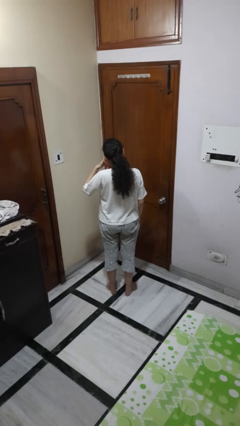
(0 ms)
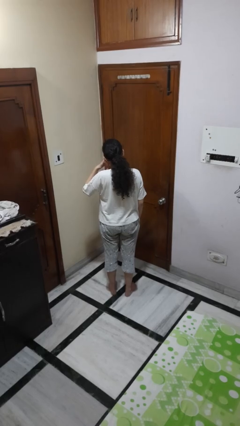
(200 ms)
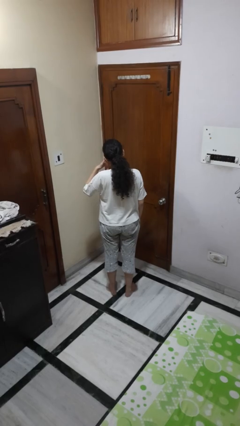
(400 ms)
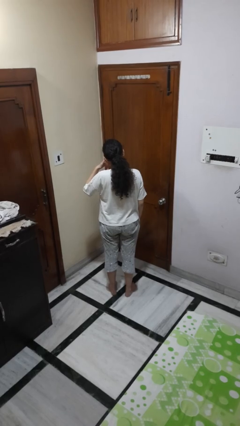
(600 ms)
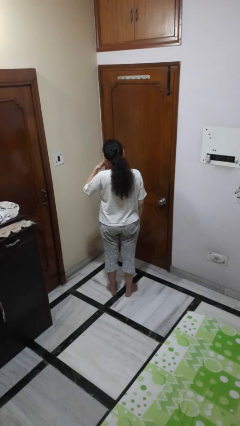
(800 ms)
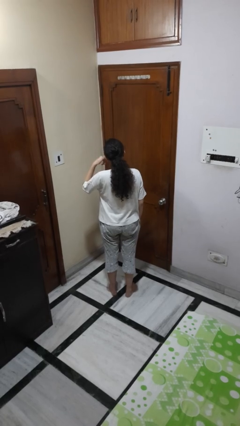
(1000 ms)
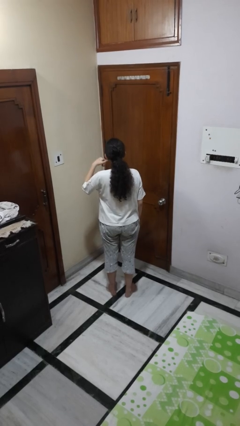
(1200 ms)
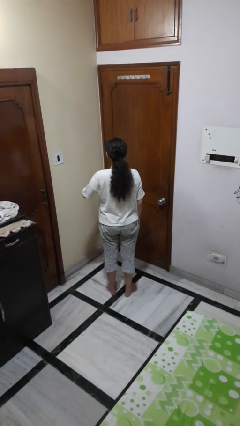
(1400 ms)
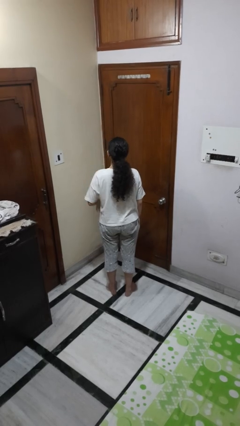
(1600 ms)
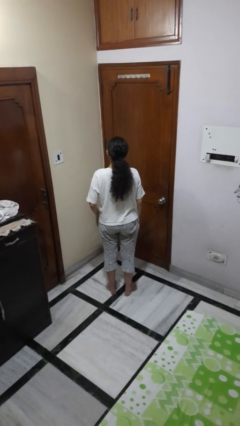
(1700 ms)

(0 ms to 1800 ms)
person gestures call me

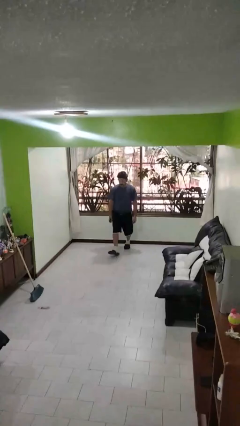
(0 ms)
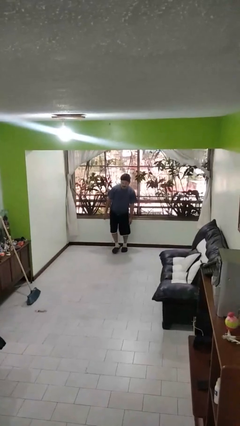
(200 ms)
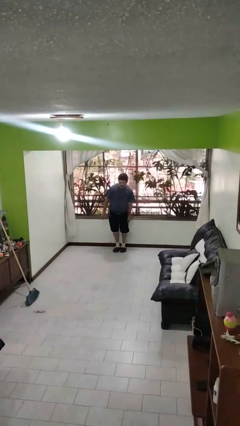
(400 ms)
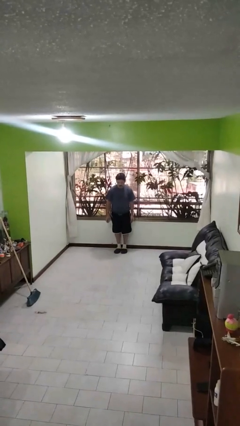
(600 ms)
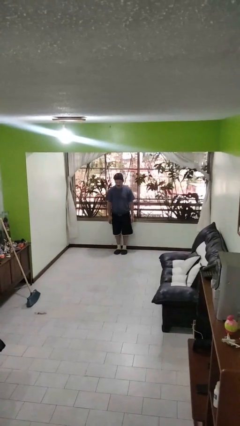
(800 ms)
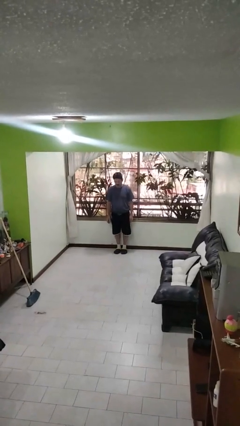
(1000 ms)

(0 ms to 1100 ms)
person stands up from floor

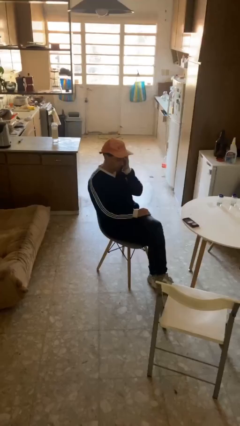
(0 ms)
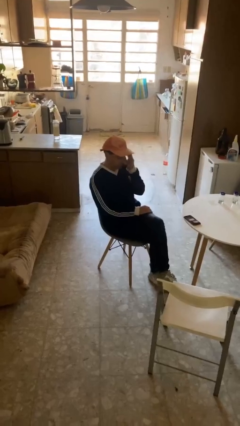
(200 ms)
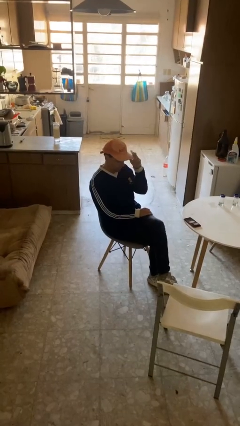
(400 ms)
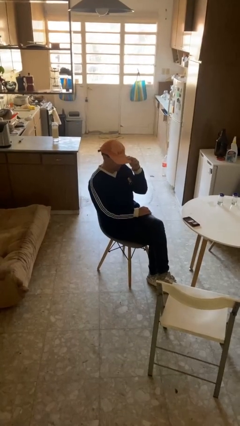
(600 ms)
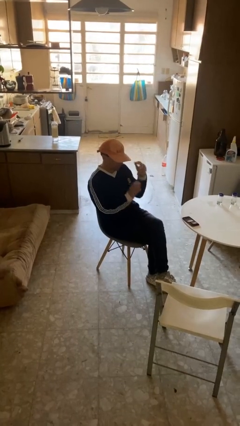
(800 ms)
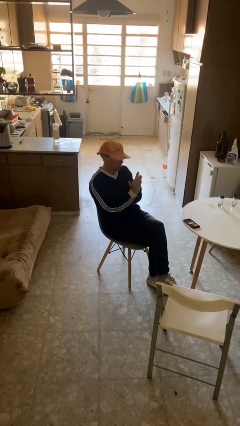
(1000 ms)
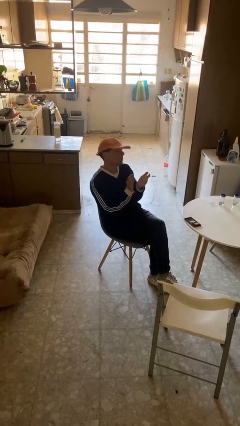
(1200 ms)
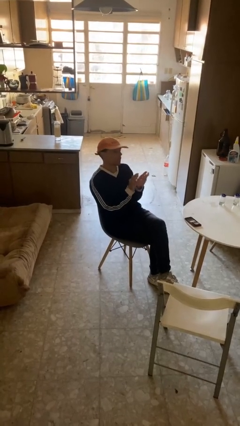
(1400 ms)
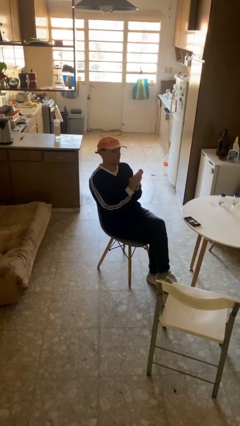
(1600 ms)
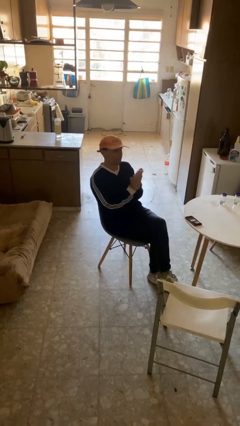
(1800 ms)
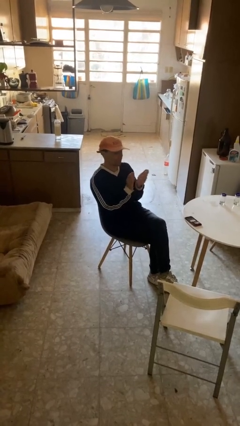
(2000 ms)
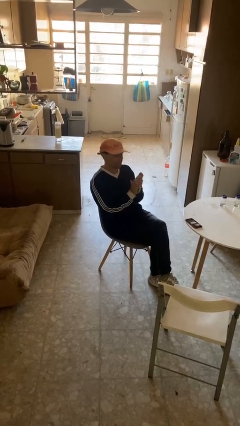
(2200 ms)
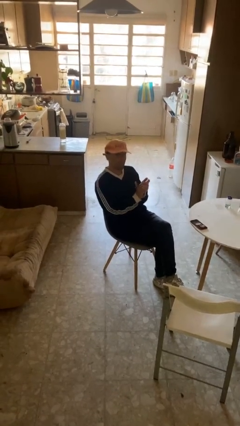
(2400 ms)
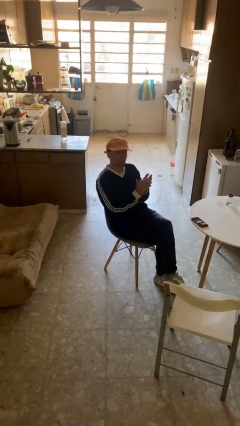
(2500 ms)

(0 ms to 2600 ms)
person claps hands

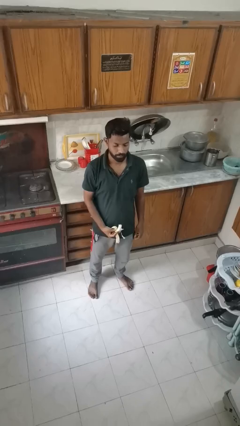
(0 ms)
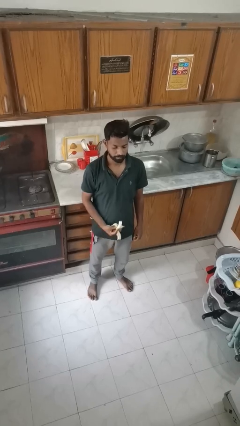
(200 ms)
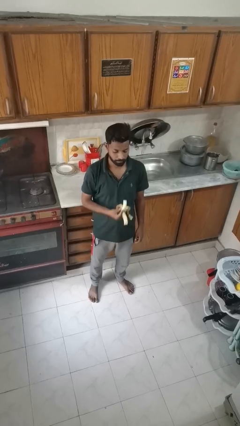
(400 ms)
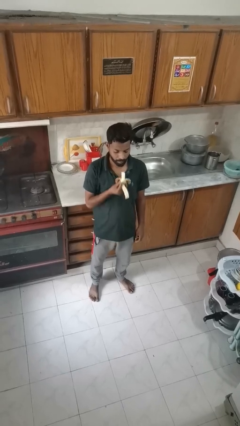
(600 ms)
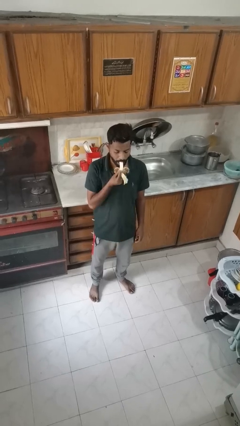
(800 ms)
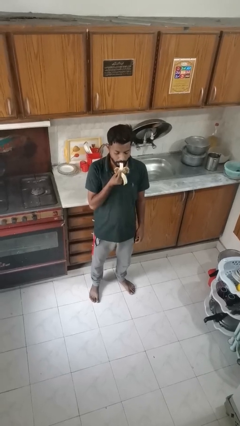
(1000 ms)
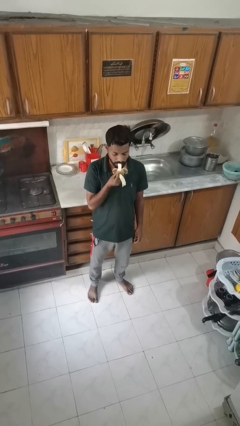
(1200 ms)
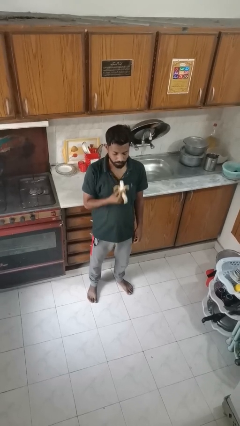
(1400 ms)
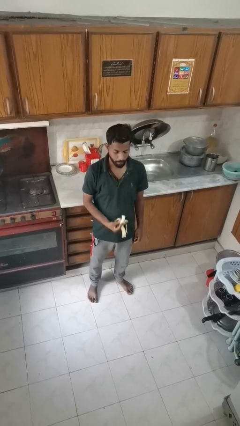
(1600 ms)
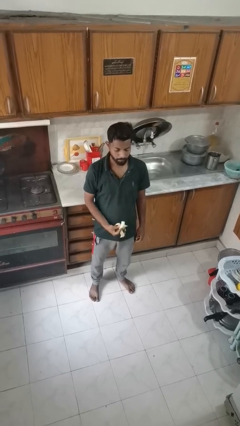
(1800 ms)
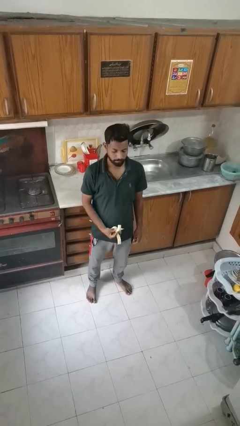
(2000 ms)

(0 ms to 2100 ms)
person eats banana

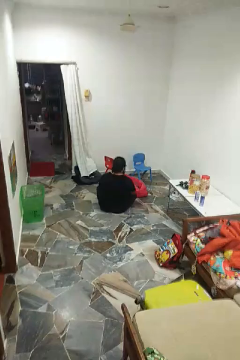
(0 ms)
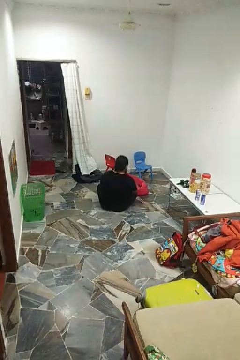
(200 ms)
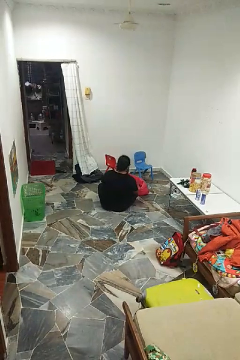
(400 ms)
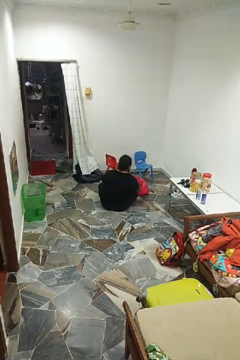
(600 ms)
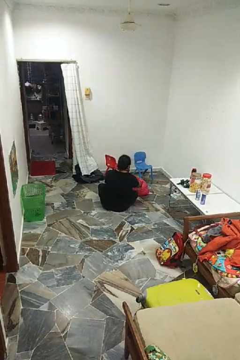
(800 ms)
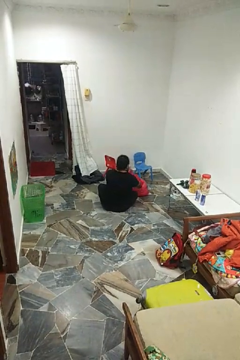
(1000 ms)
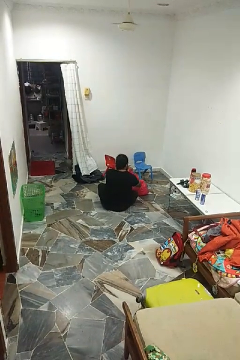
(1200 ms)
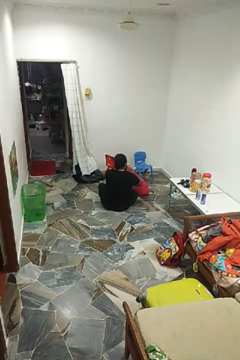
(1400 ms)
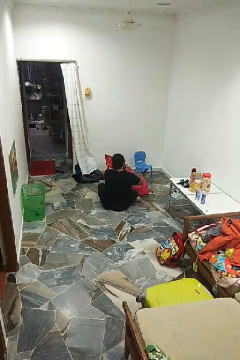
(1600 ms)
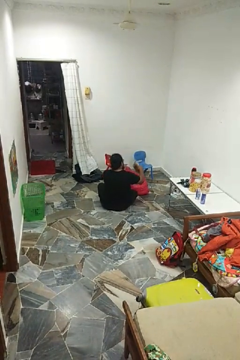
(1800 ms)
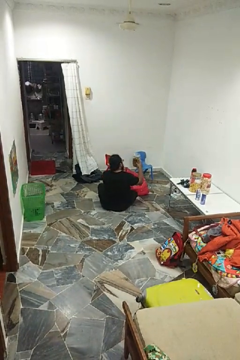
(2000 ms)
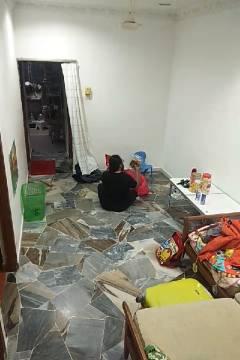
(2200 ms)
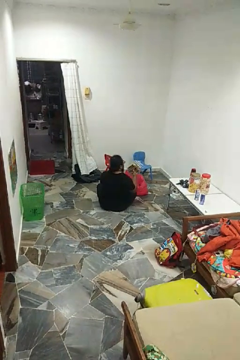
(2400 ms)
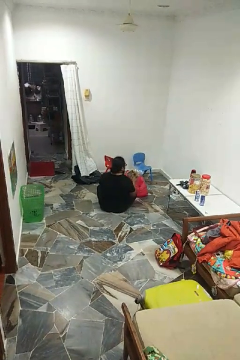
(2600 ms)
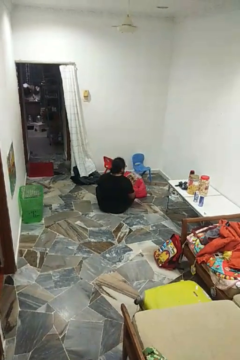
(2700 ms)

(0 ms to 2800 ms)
person takes object from bag

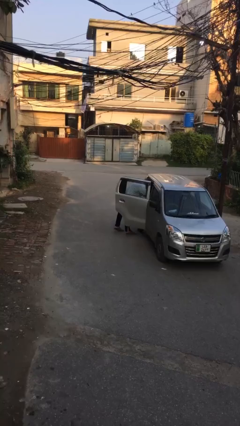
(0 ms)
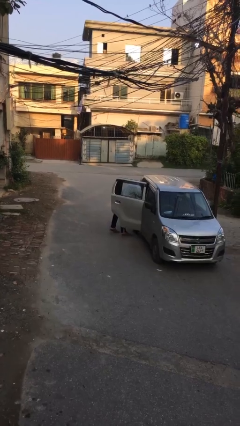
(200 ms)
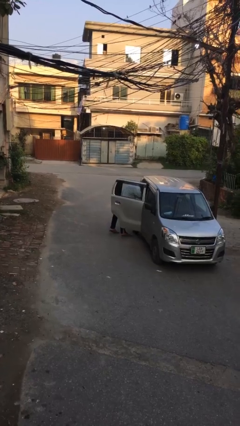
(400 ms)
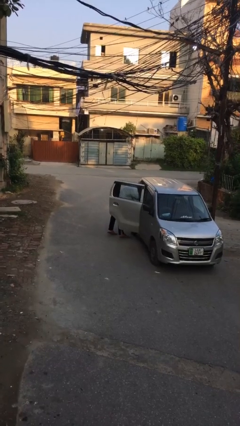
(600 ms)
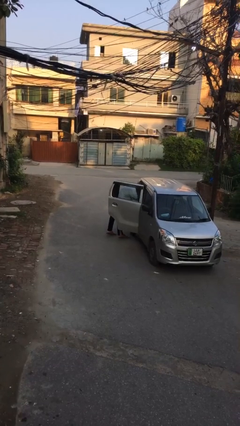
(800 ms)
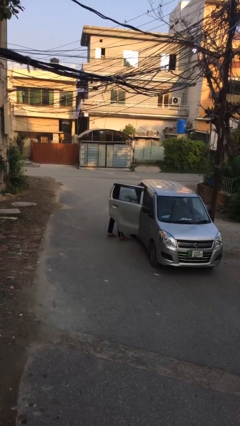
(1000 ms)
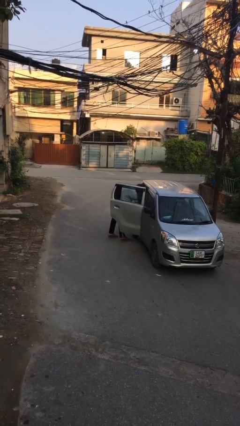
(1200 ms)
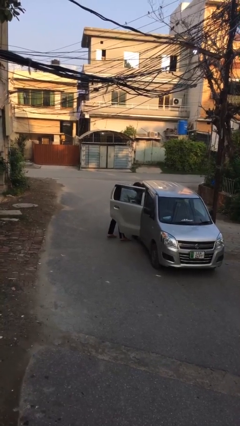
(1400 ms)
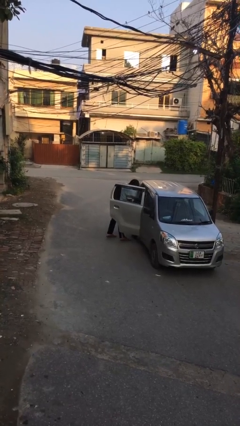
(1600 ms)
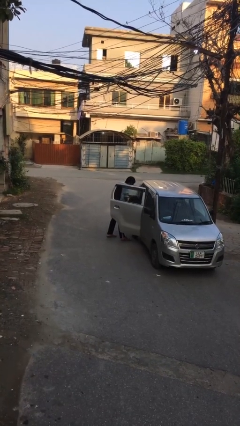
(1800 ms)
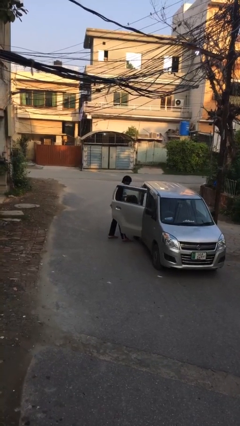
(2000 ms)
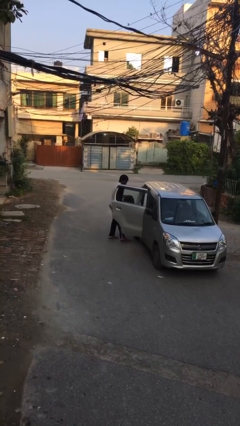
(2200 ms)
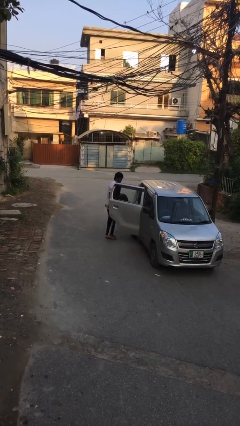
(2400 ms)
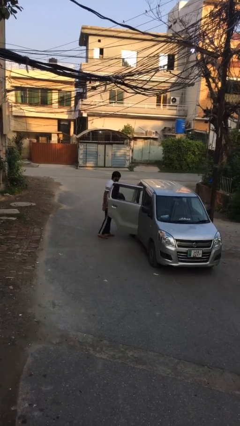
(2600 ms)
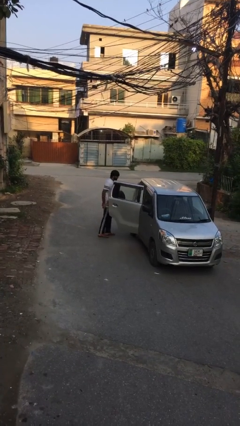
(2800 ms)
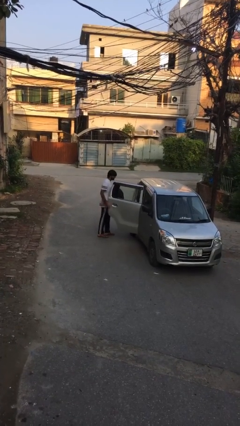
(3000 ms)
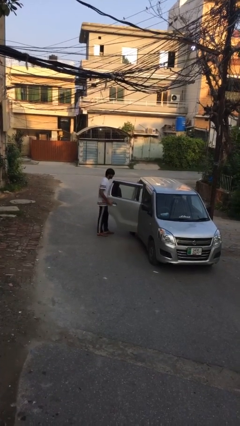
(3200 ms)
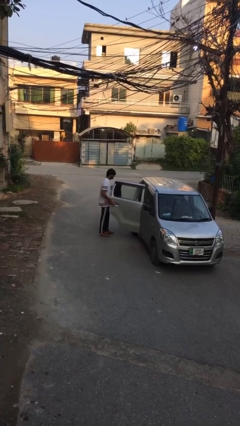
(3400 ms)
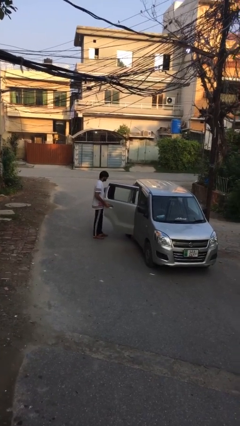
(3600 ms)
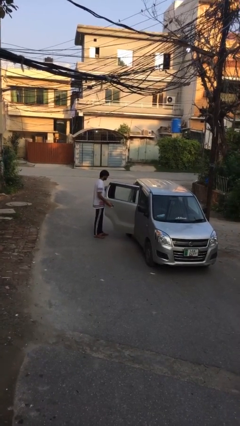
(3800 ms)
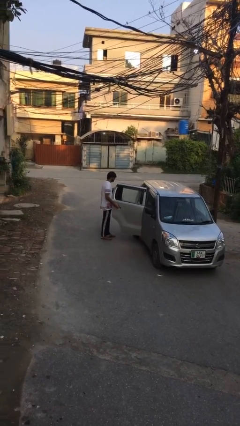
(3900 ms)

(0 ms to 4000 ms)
person unloads car

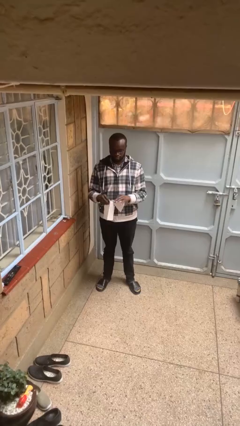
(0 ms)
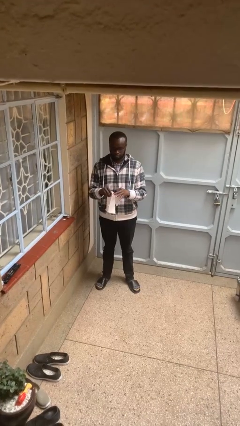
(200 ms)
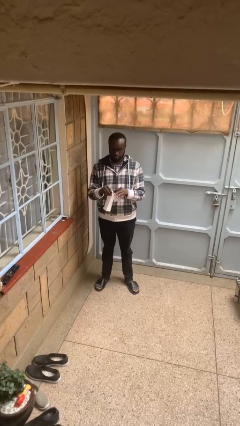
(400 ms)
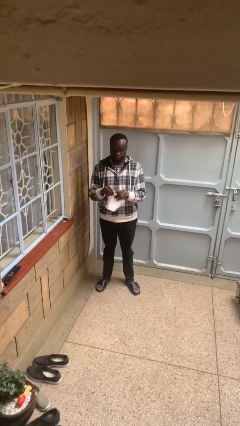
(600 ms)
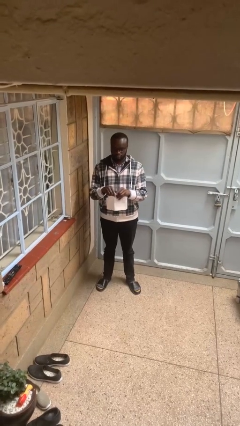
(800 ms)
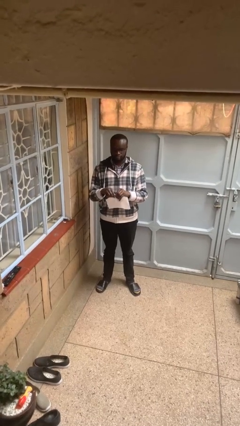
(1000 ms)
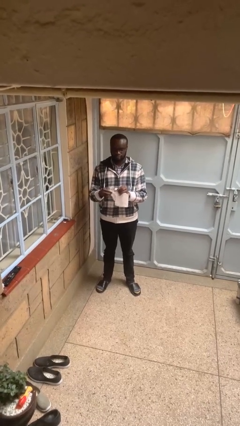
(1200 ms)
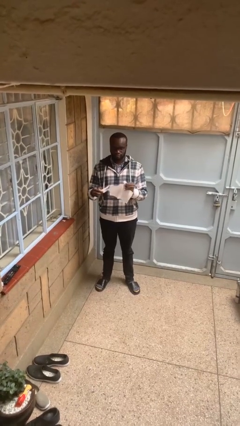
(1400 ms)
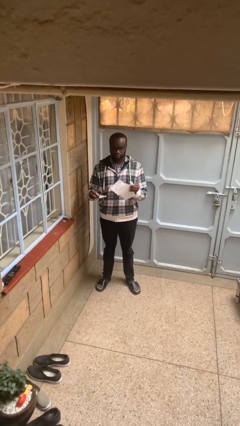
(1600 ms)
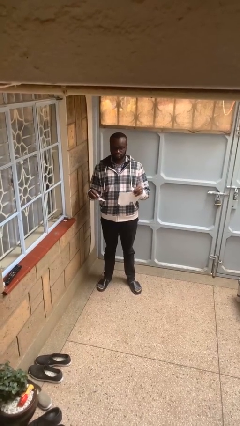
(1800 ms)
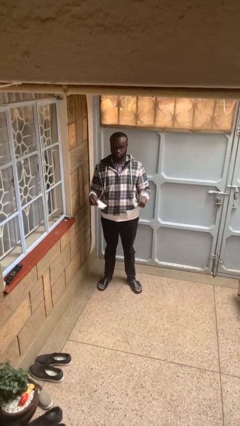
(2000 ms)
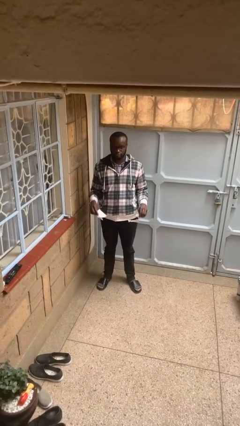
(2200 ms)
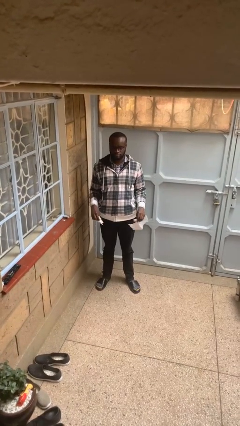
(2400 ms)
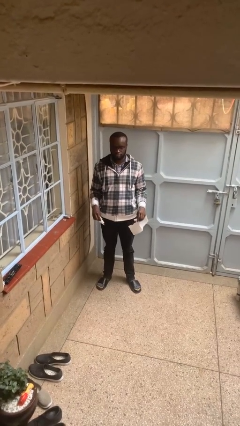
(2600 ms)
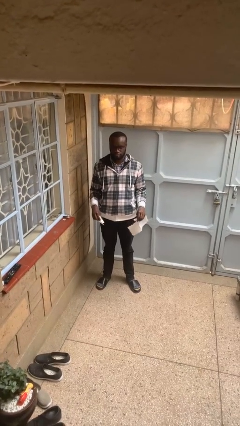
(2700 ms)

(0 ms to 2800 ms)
person tears paper

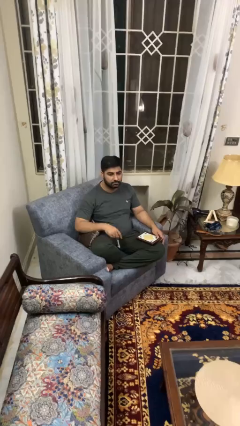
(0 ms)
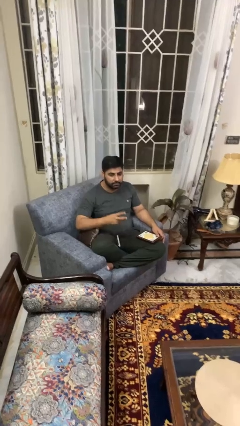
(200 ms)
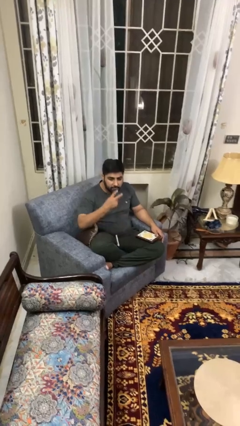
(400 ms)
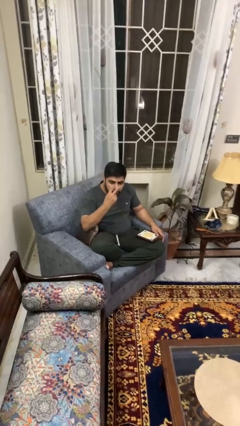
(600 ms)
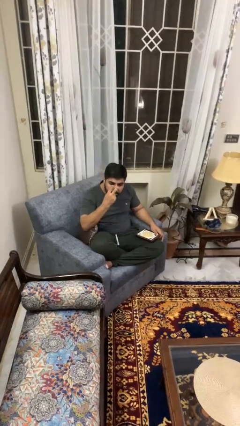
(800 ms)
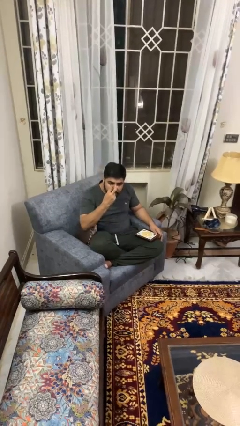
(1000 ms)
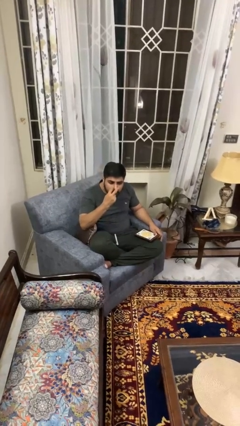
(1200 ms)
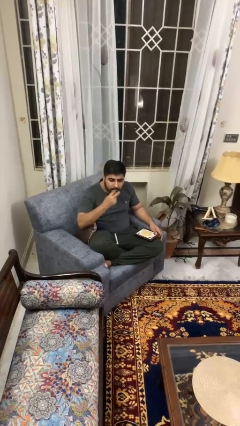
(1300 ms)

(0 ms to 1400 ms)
person gestures watch closely
